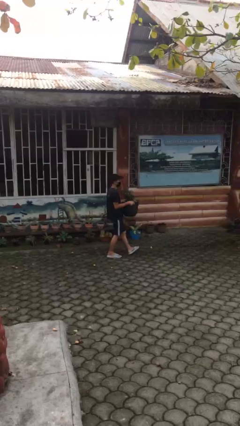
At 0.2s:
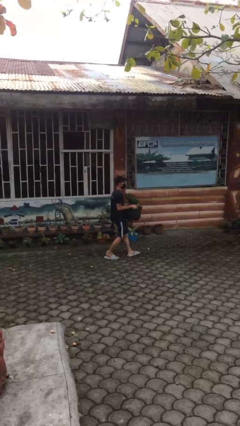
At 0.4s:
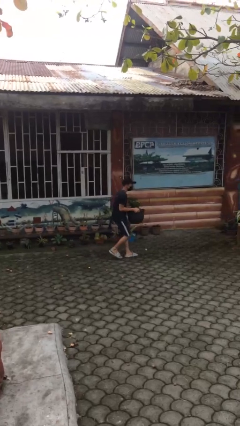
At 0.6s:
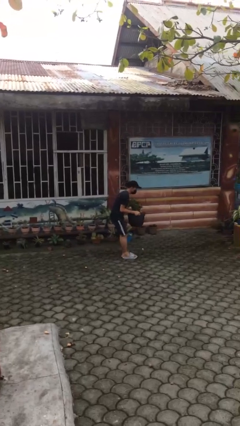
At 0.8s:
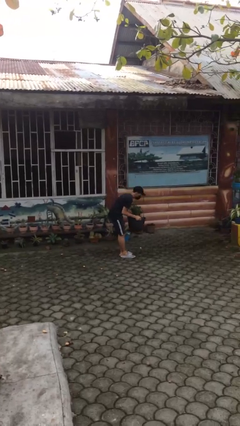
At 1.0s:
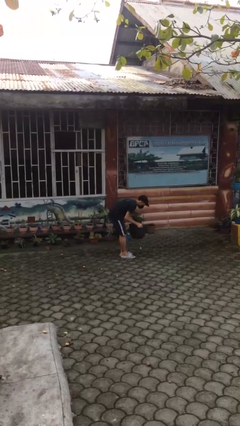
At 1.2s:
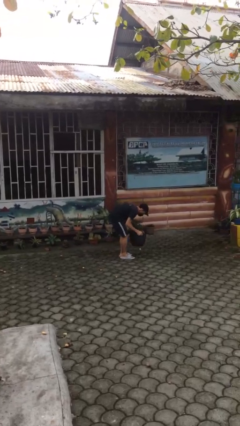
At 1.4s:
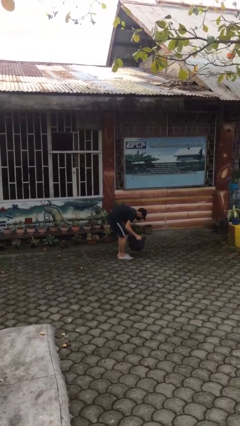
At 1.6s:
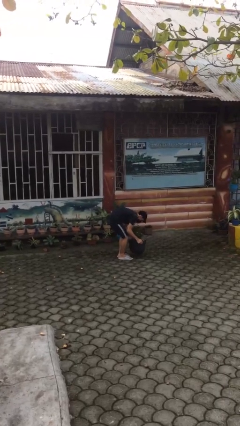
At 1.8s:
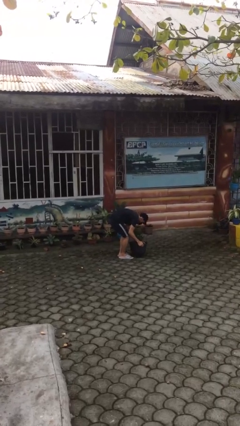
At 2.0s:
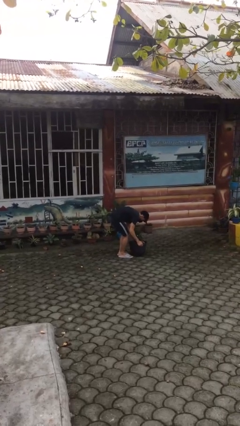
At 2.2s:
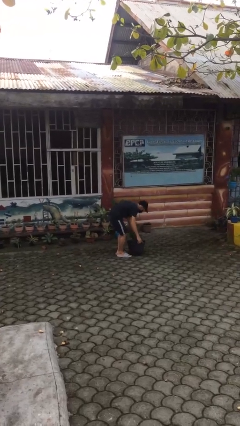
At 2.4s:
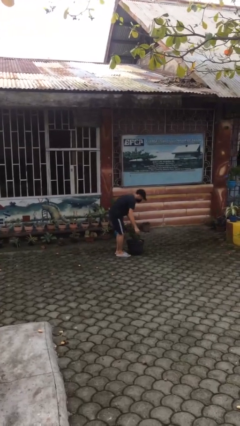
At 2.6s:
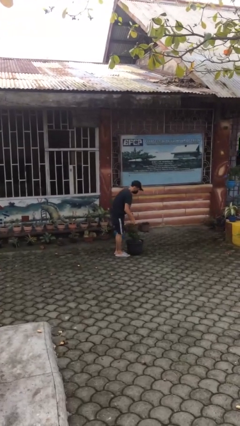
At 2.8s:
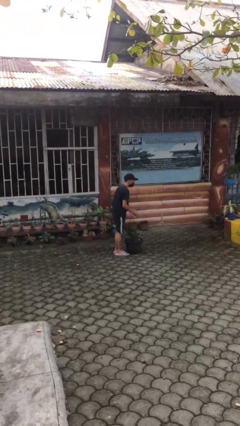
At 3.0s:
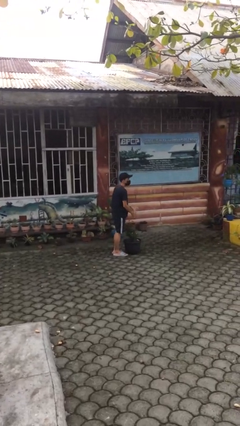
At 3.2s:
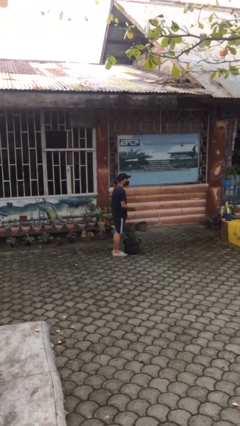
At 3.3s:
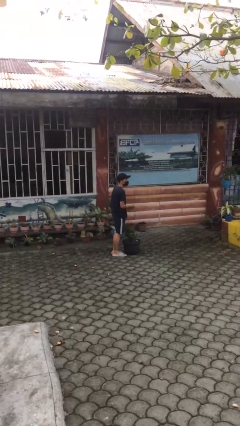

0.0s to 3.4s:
person puts down object on floor

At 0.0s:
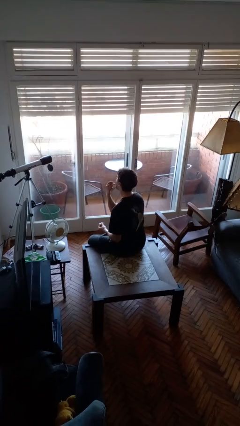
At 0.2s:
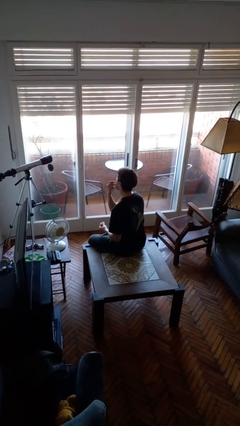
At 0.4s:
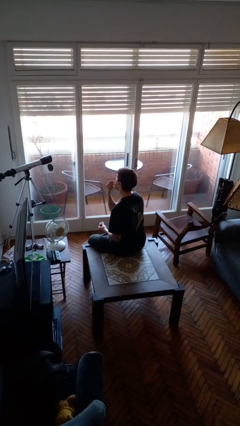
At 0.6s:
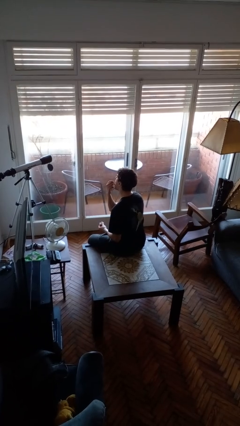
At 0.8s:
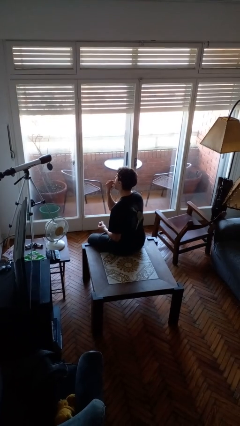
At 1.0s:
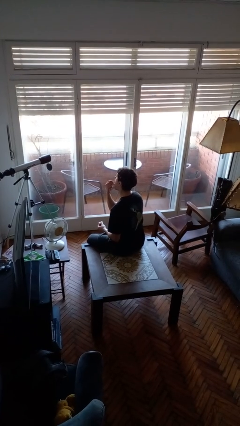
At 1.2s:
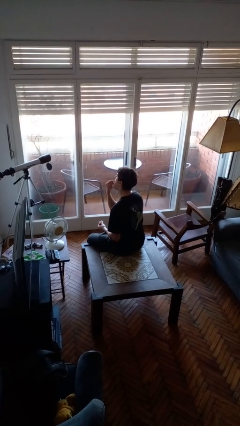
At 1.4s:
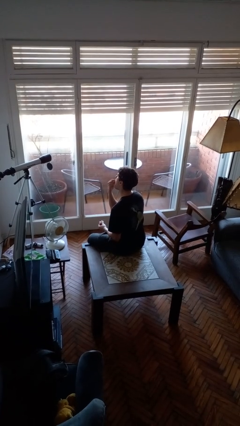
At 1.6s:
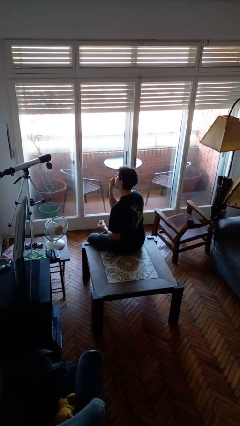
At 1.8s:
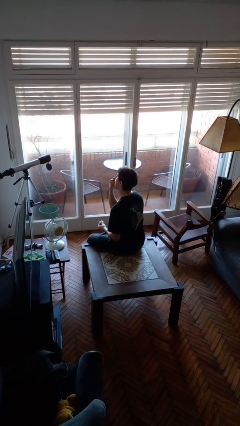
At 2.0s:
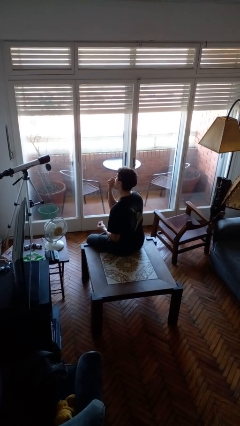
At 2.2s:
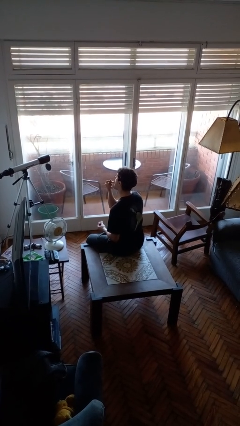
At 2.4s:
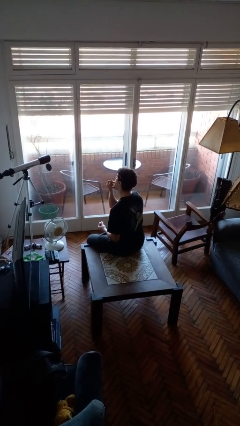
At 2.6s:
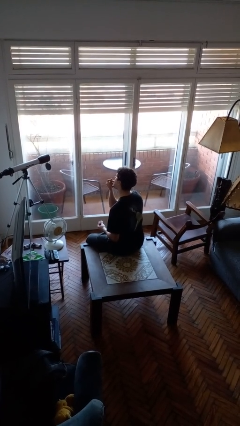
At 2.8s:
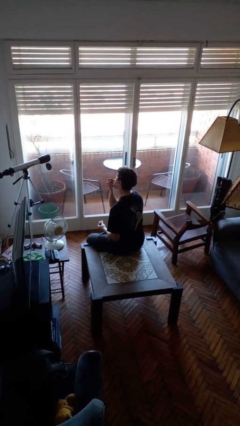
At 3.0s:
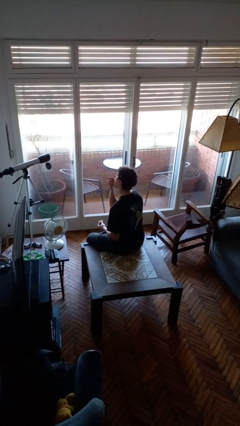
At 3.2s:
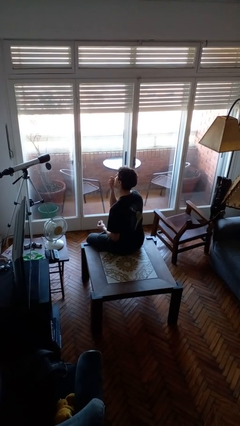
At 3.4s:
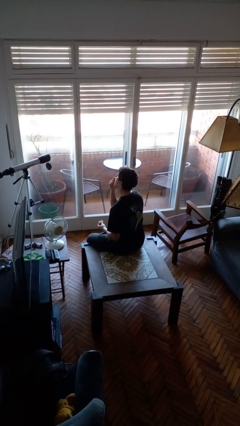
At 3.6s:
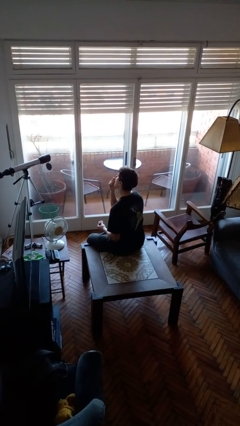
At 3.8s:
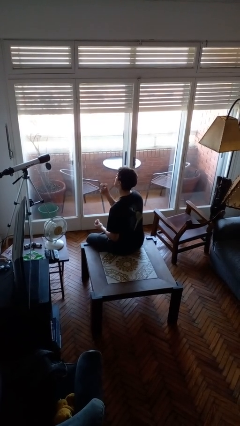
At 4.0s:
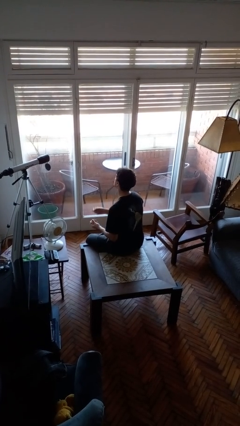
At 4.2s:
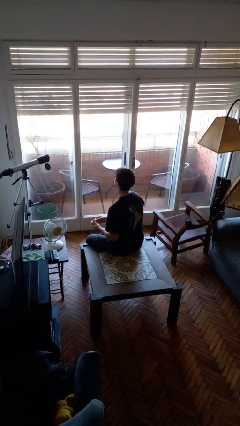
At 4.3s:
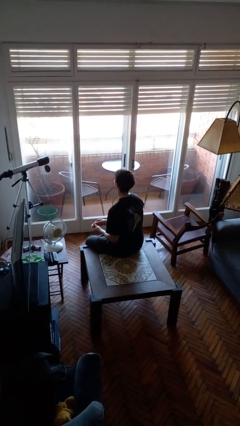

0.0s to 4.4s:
person applies lip makeup

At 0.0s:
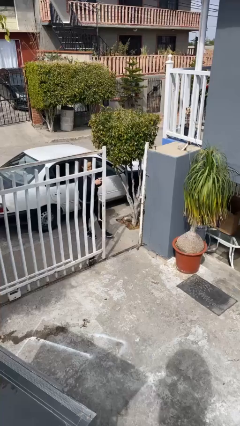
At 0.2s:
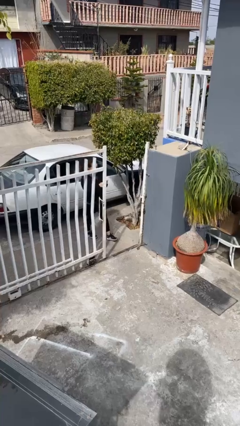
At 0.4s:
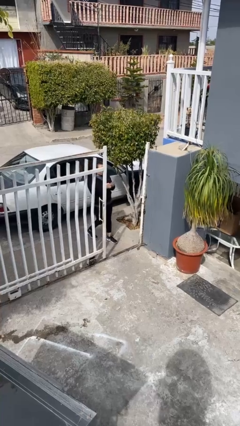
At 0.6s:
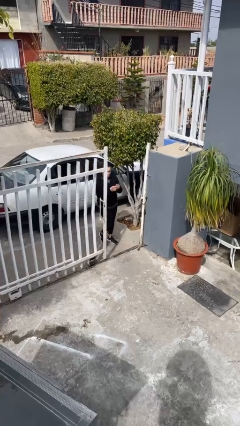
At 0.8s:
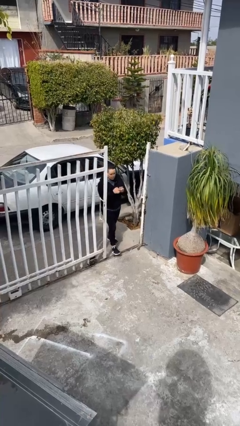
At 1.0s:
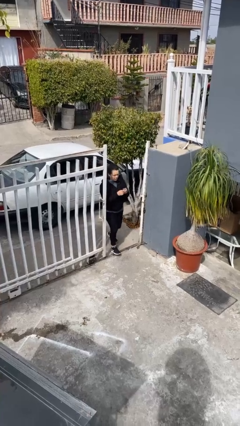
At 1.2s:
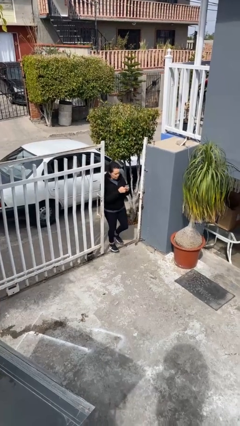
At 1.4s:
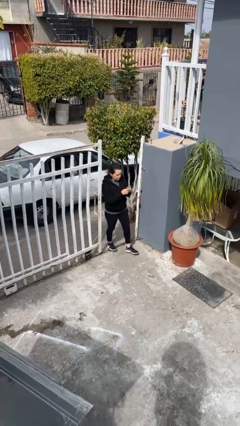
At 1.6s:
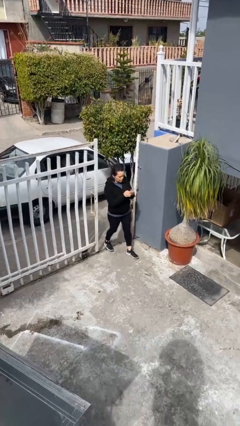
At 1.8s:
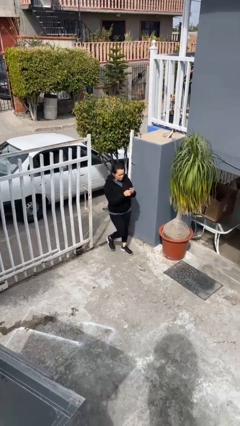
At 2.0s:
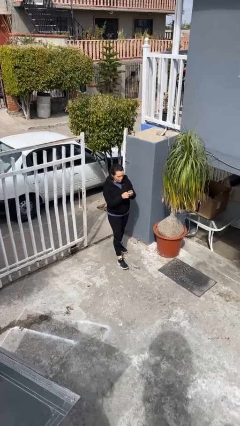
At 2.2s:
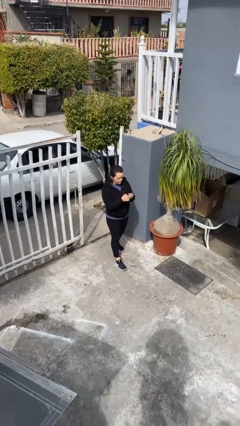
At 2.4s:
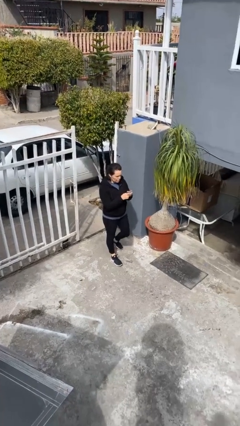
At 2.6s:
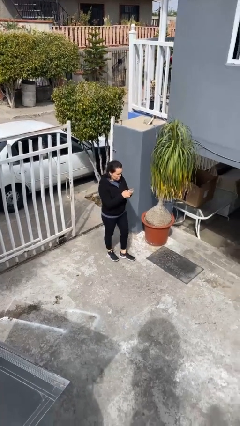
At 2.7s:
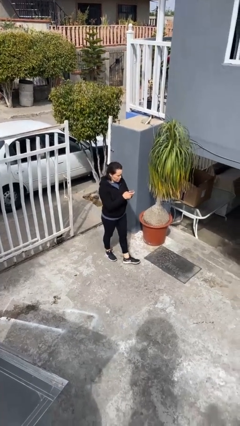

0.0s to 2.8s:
person enters scene through structure

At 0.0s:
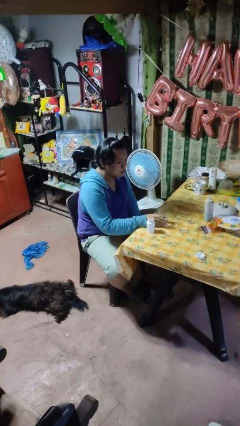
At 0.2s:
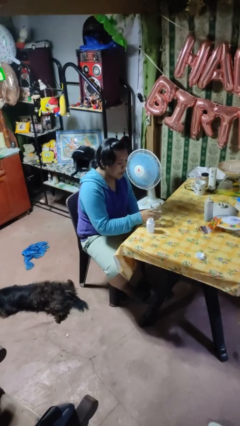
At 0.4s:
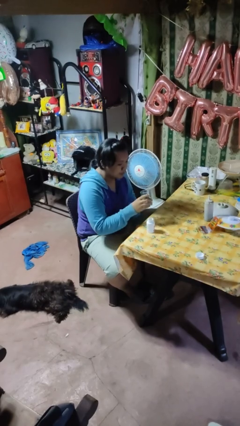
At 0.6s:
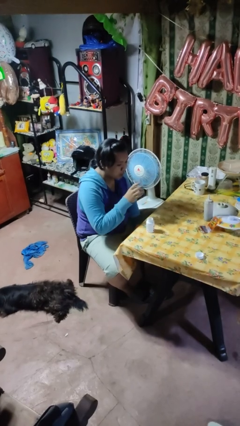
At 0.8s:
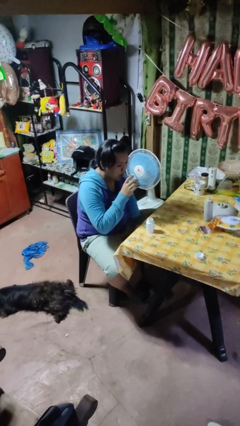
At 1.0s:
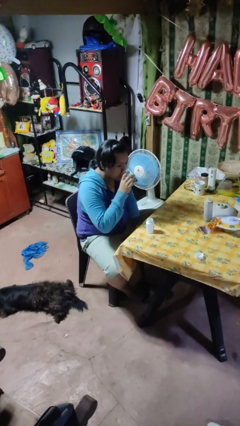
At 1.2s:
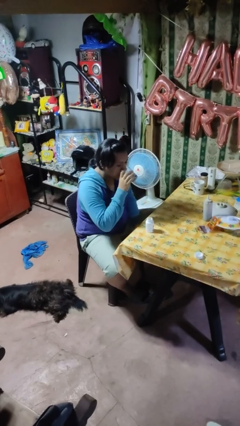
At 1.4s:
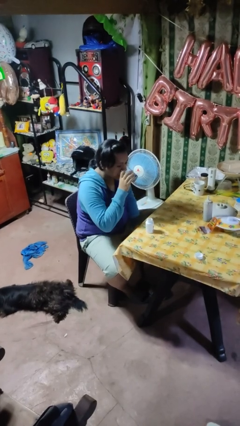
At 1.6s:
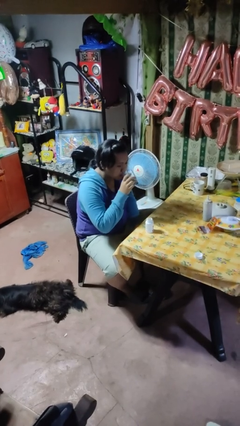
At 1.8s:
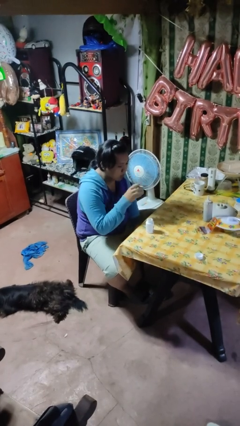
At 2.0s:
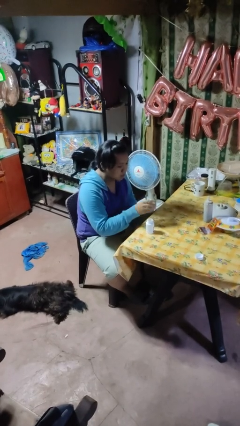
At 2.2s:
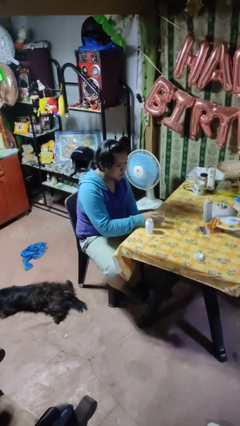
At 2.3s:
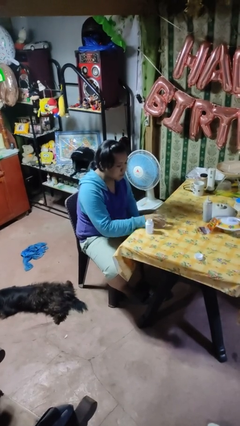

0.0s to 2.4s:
person drinks from cup

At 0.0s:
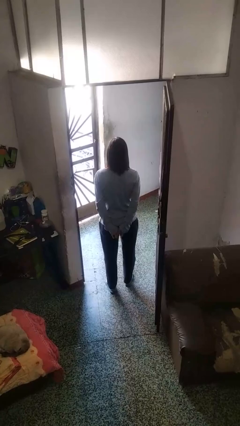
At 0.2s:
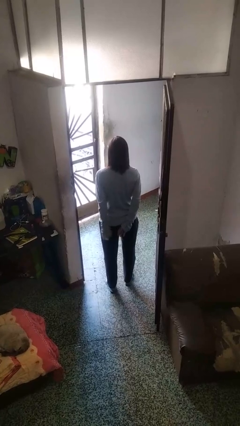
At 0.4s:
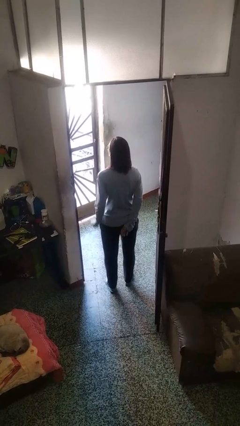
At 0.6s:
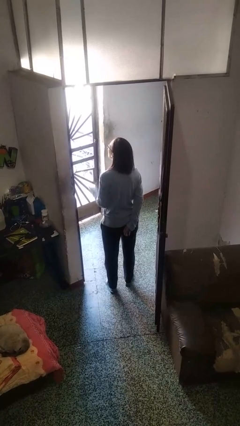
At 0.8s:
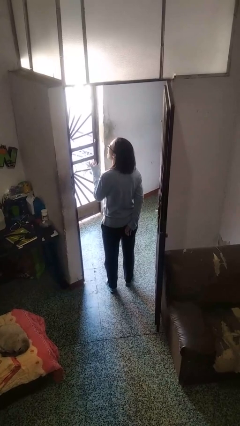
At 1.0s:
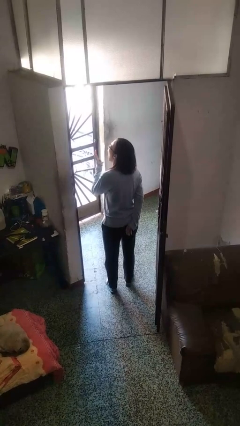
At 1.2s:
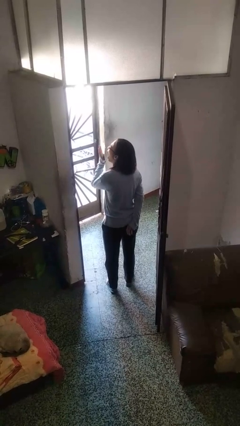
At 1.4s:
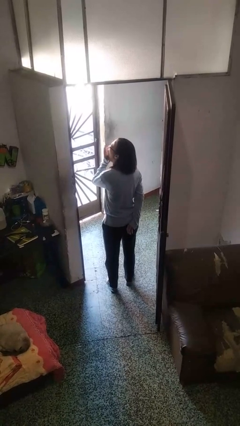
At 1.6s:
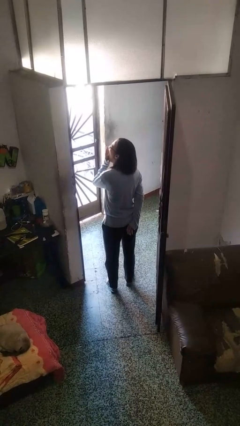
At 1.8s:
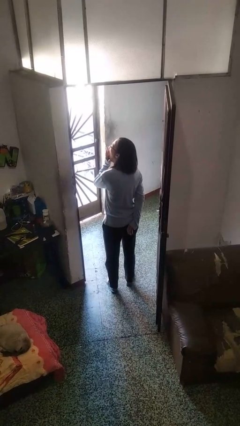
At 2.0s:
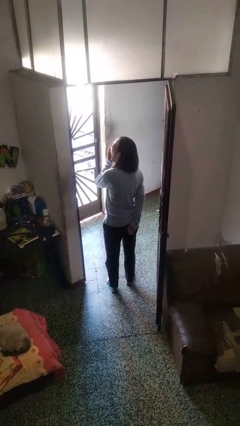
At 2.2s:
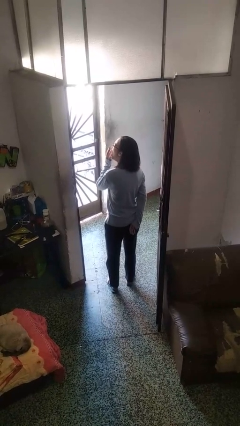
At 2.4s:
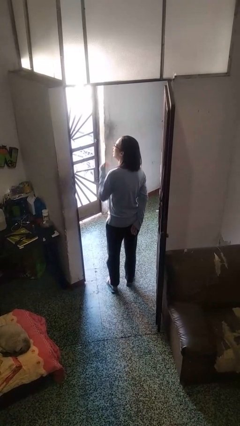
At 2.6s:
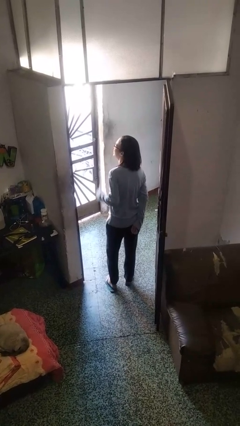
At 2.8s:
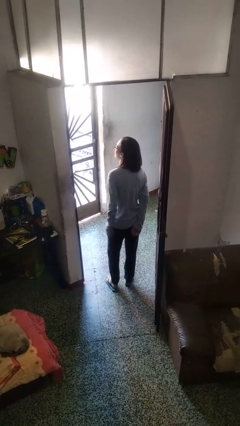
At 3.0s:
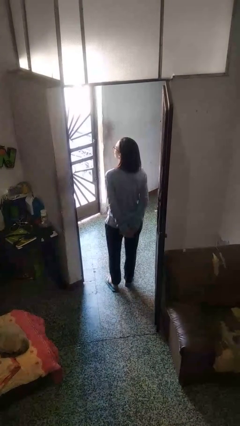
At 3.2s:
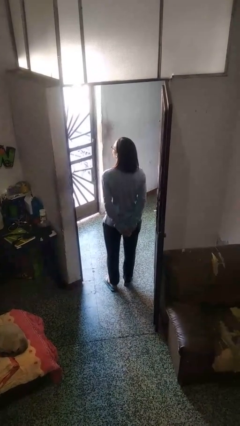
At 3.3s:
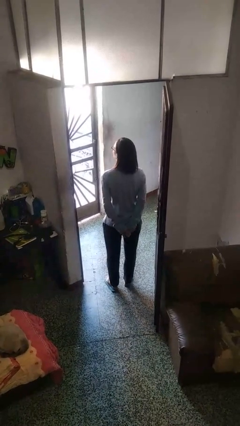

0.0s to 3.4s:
person yawns

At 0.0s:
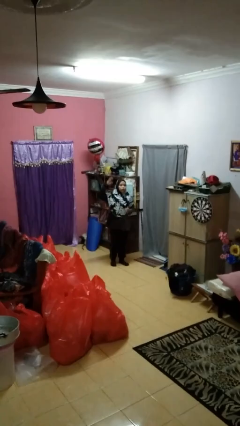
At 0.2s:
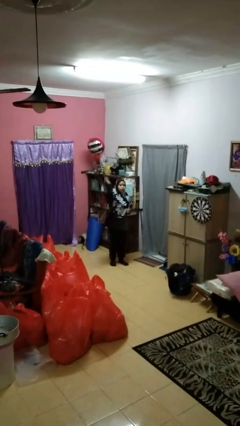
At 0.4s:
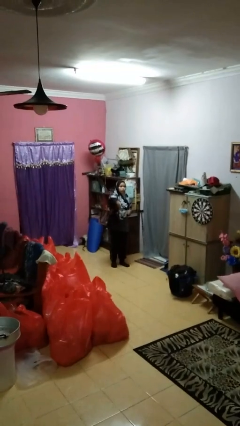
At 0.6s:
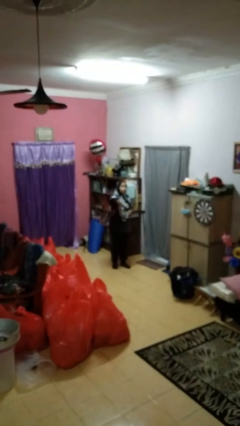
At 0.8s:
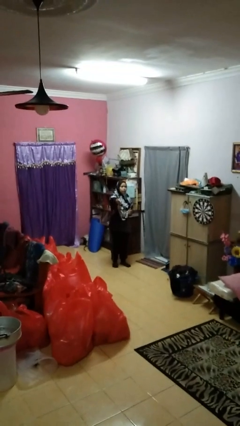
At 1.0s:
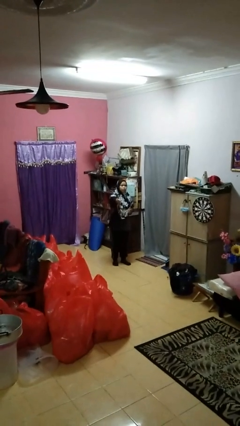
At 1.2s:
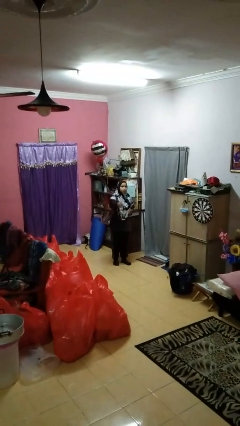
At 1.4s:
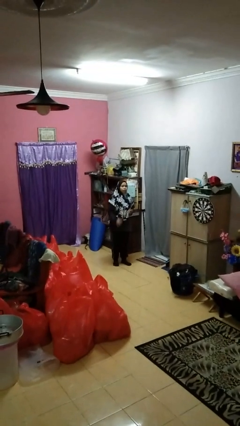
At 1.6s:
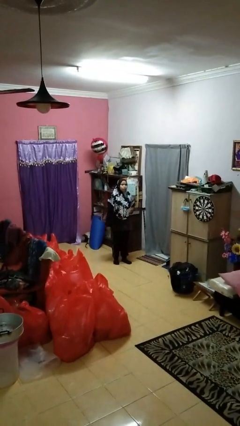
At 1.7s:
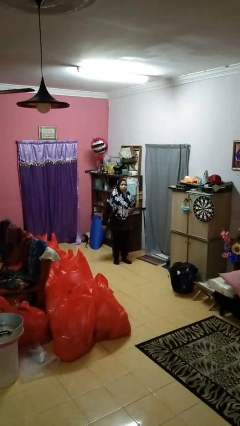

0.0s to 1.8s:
person karate chop
